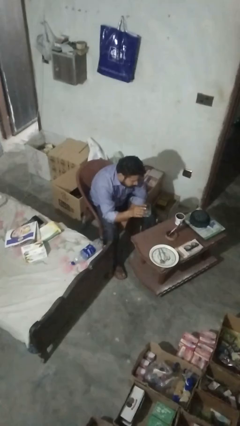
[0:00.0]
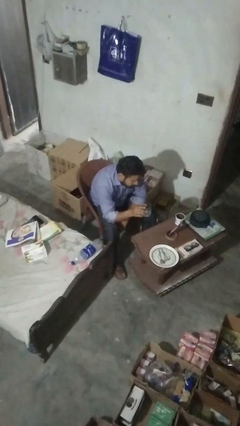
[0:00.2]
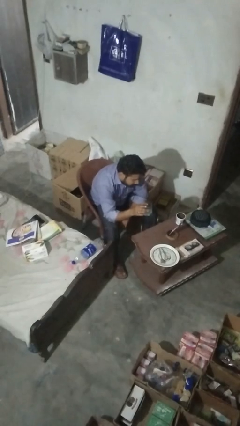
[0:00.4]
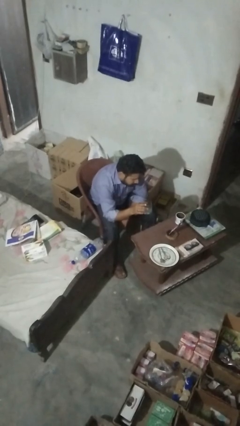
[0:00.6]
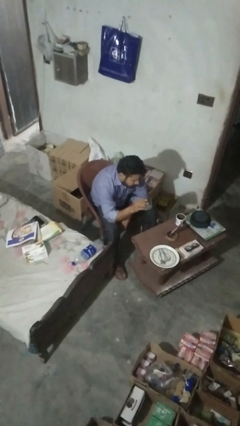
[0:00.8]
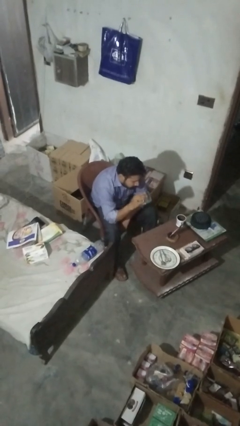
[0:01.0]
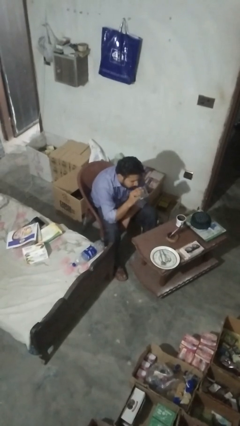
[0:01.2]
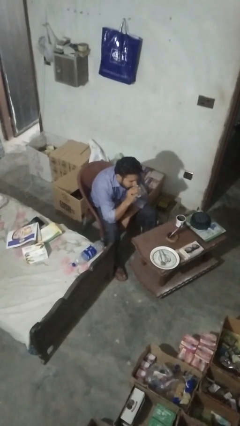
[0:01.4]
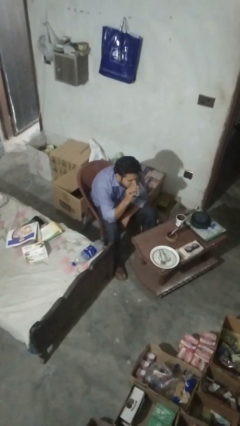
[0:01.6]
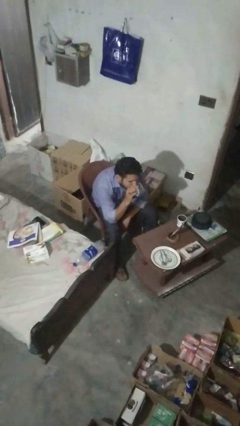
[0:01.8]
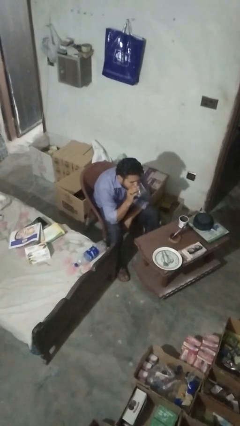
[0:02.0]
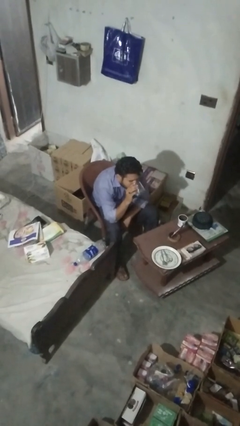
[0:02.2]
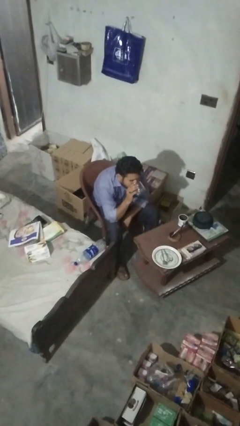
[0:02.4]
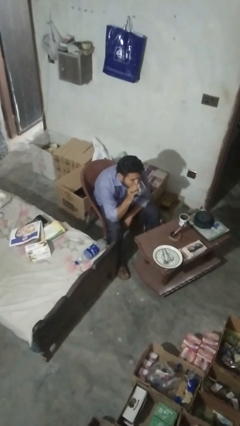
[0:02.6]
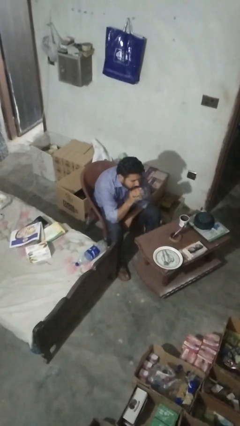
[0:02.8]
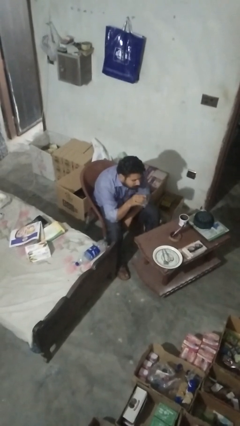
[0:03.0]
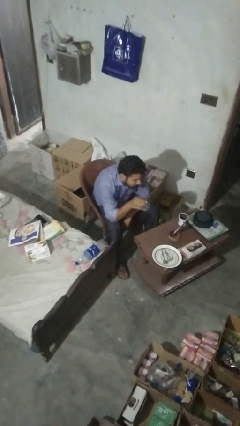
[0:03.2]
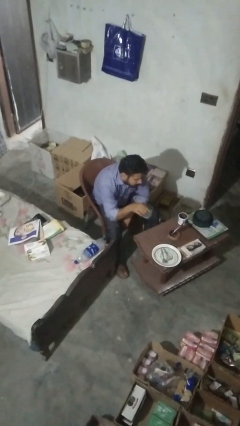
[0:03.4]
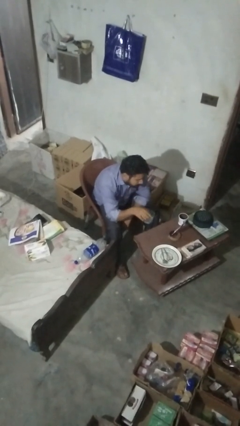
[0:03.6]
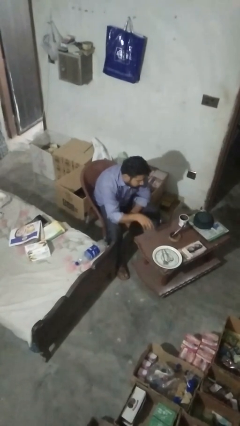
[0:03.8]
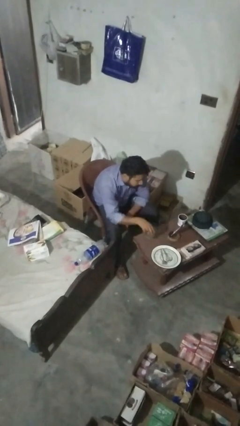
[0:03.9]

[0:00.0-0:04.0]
person drinks from shotglass

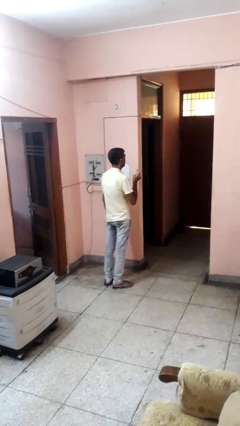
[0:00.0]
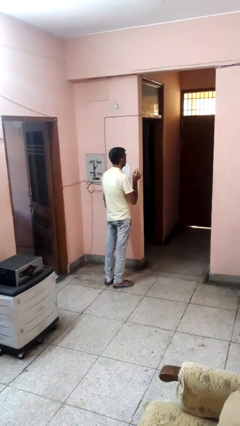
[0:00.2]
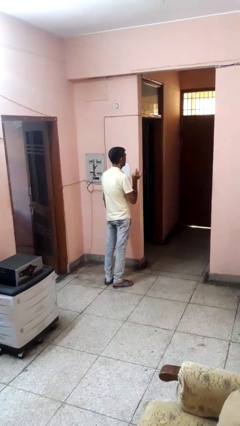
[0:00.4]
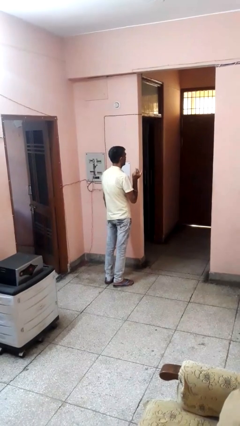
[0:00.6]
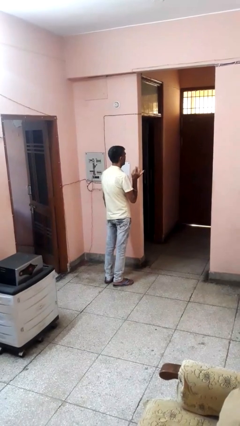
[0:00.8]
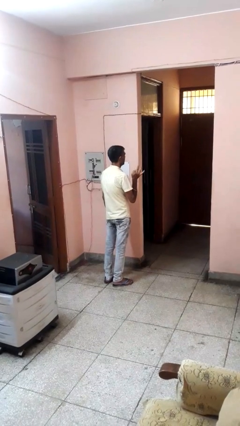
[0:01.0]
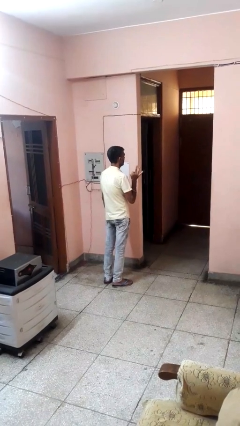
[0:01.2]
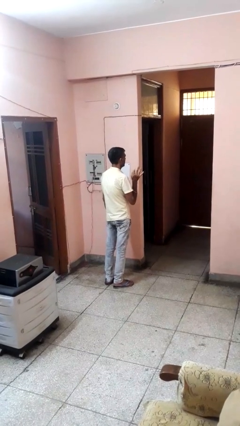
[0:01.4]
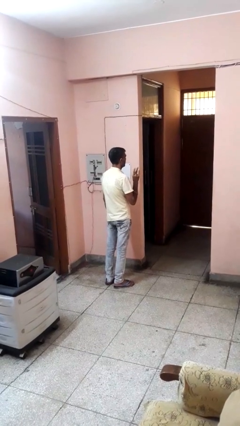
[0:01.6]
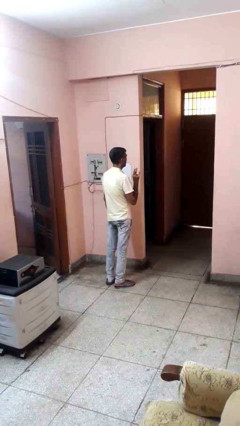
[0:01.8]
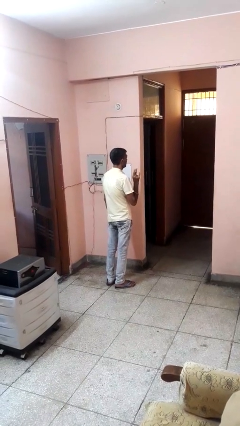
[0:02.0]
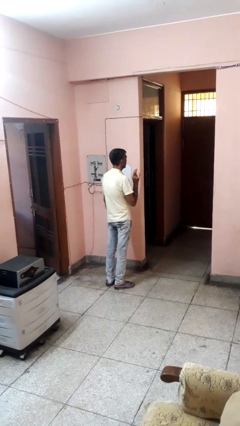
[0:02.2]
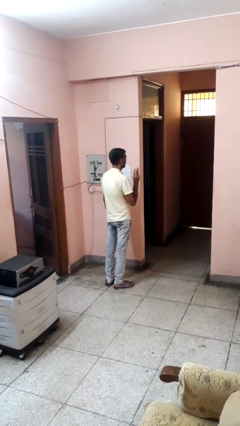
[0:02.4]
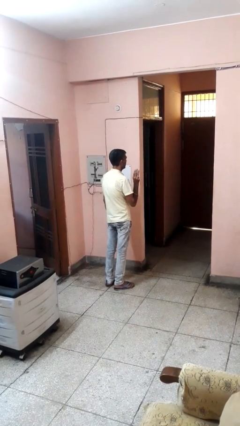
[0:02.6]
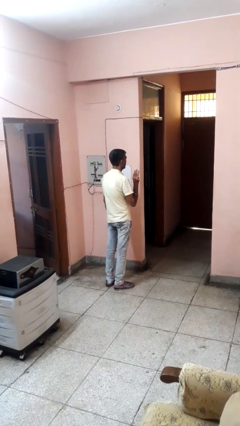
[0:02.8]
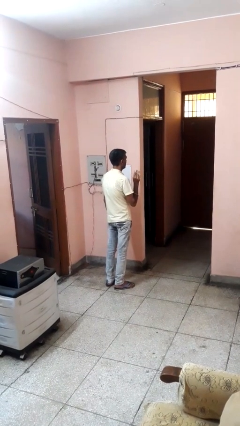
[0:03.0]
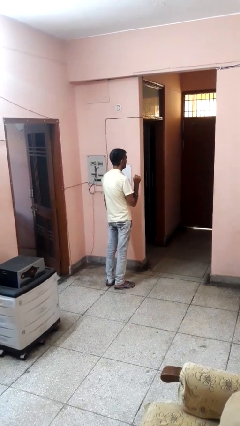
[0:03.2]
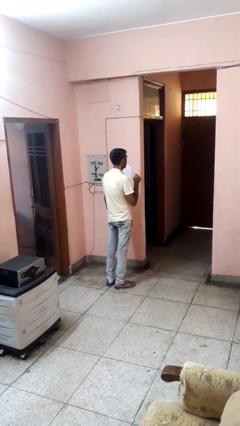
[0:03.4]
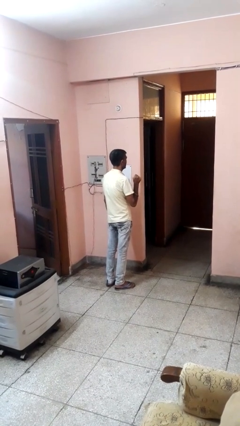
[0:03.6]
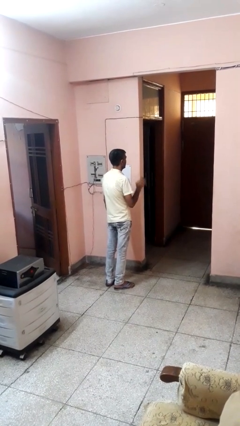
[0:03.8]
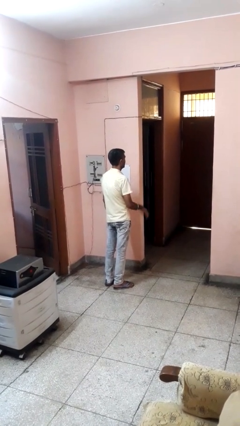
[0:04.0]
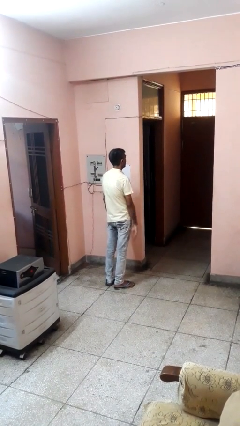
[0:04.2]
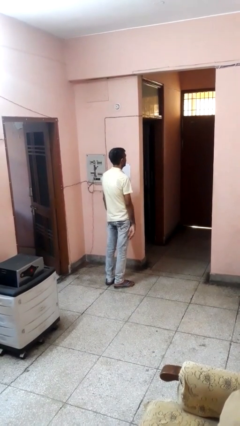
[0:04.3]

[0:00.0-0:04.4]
person cracks knuckles

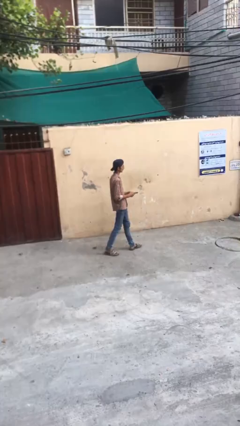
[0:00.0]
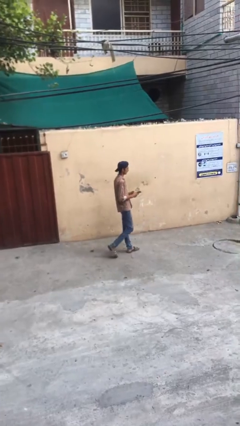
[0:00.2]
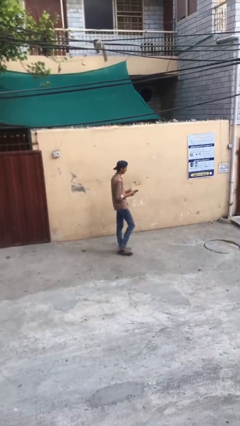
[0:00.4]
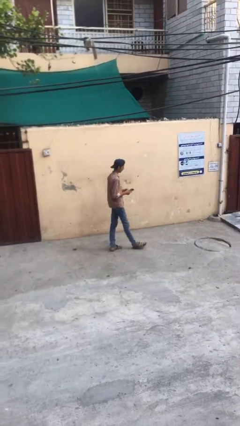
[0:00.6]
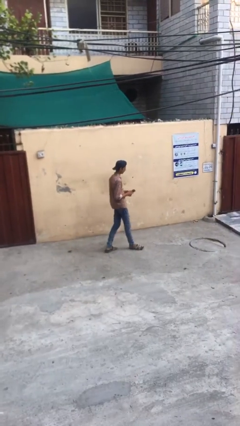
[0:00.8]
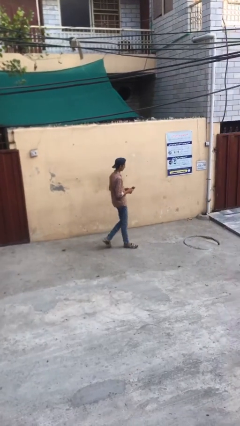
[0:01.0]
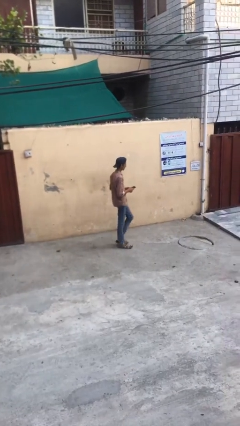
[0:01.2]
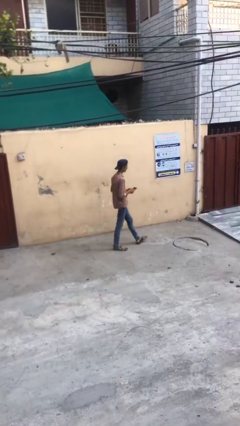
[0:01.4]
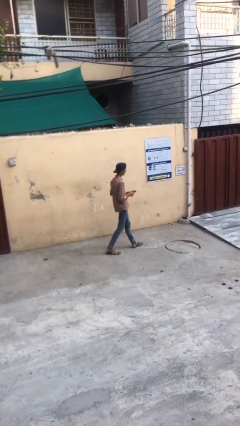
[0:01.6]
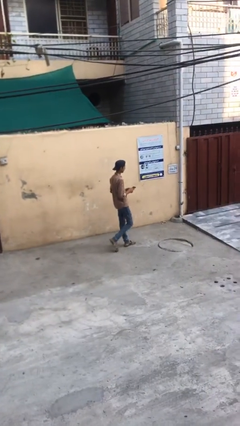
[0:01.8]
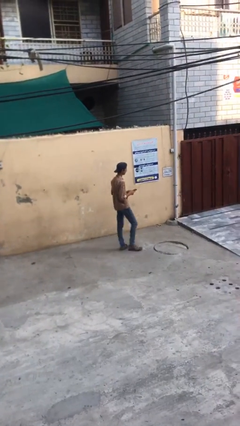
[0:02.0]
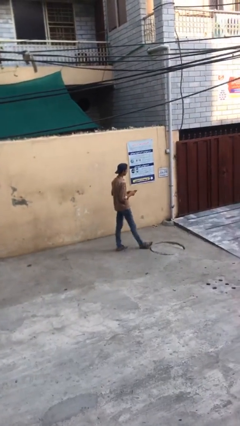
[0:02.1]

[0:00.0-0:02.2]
person texts on phone

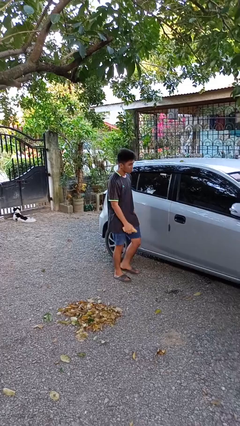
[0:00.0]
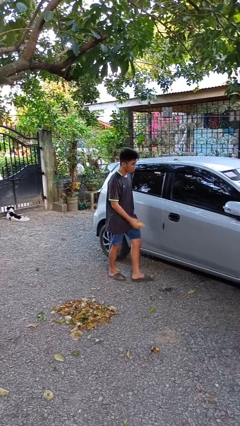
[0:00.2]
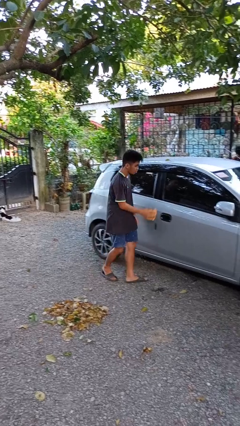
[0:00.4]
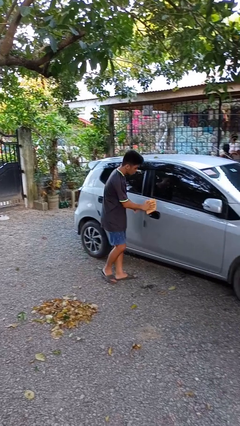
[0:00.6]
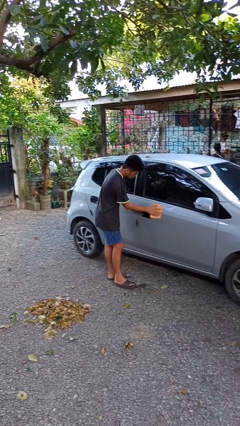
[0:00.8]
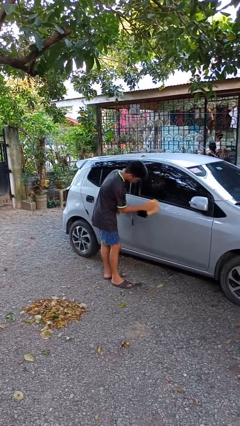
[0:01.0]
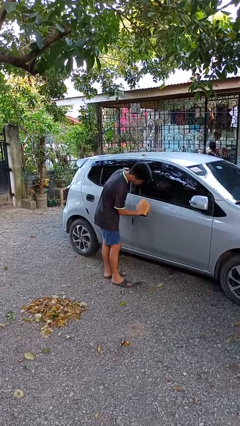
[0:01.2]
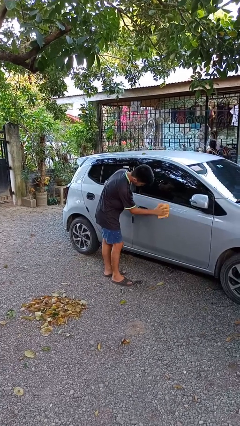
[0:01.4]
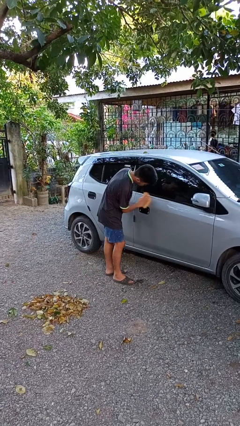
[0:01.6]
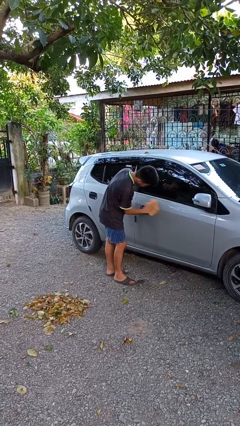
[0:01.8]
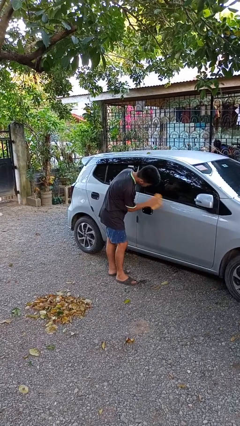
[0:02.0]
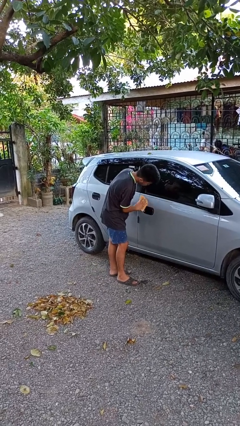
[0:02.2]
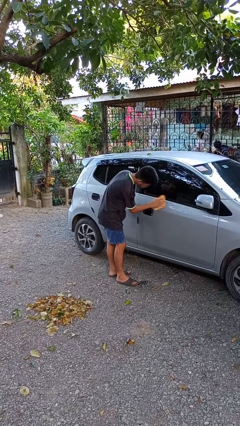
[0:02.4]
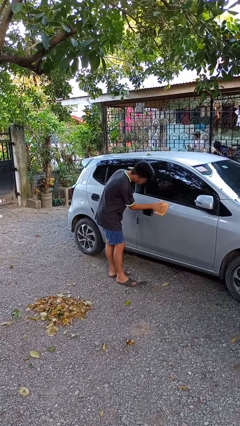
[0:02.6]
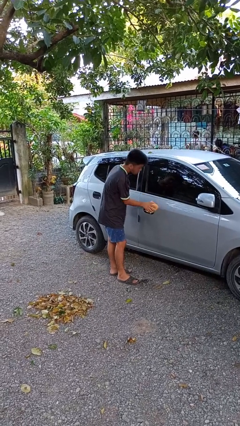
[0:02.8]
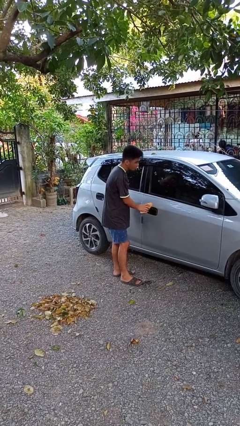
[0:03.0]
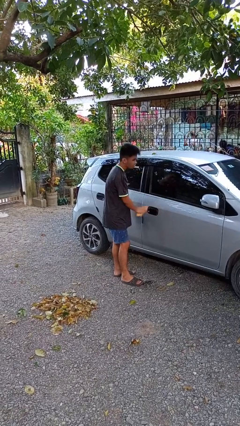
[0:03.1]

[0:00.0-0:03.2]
person polishes car with rag

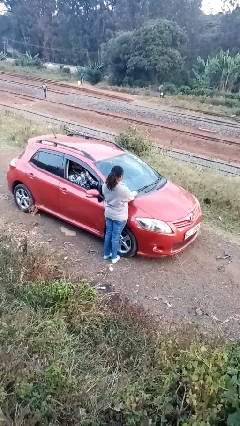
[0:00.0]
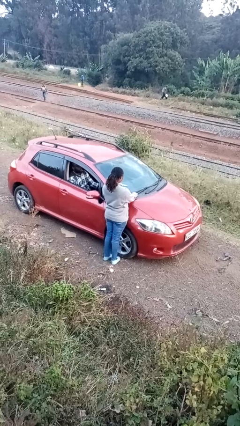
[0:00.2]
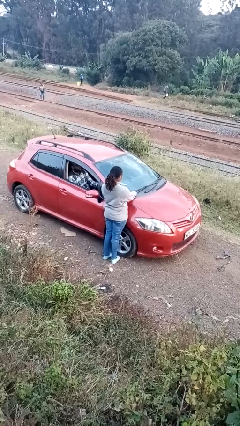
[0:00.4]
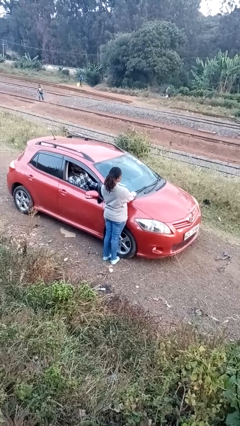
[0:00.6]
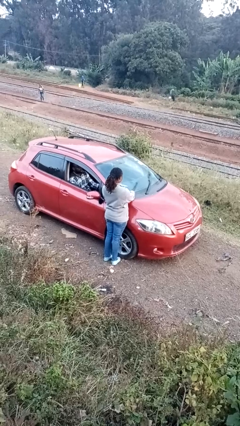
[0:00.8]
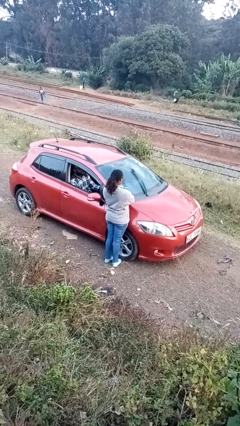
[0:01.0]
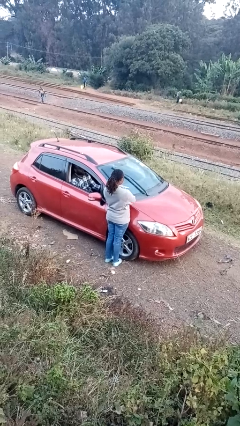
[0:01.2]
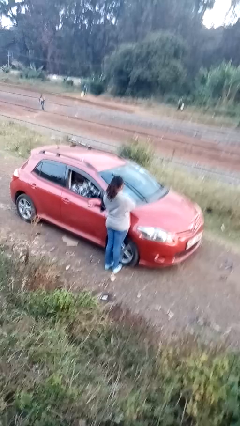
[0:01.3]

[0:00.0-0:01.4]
person flips up car wipers

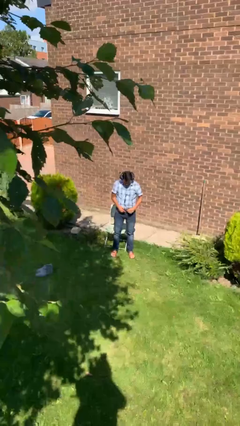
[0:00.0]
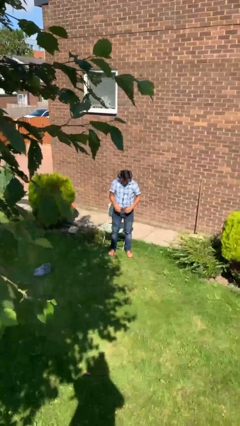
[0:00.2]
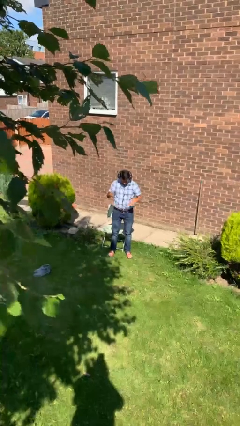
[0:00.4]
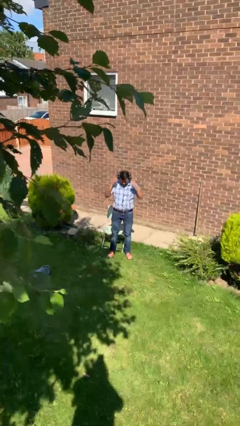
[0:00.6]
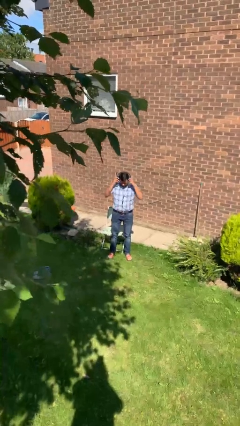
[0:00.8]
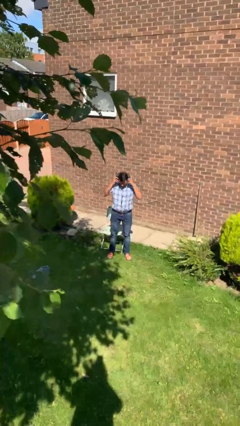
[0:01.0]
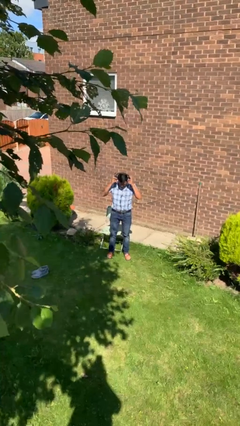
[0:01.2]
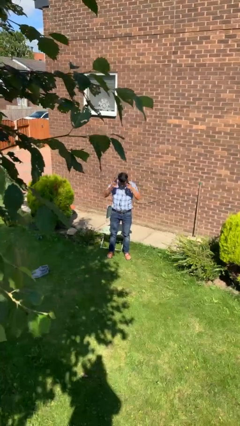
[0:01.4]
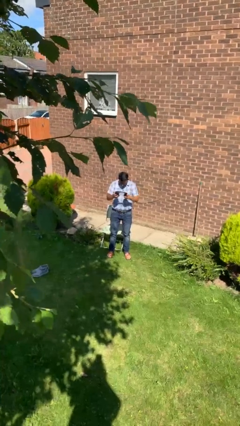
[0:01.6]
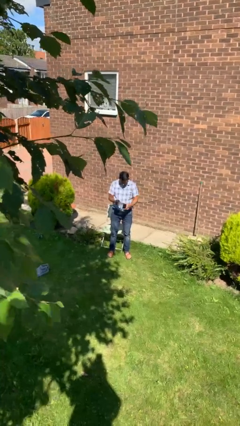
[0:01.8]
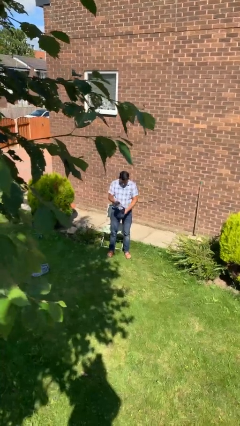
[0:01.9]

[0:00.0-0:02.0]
person takes off headphones
